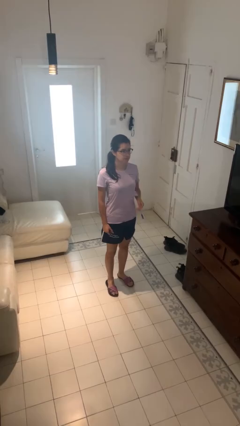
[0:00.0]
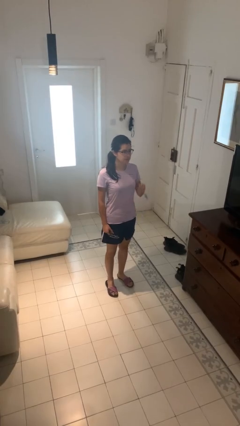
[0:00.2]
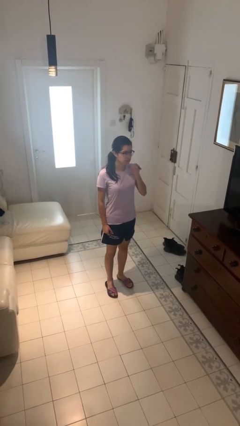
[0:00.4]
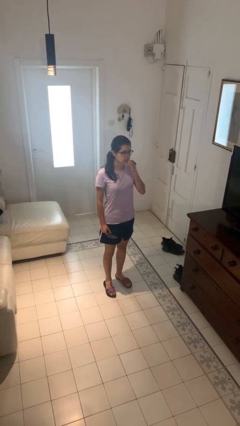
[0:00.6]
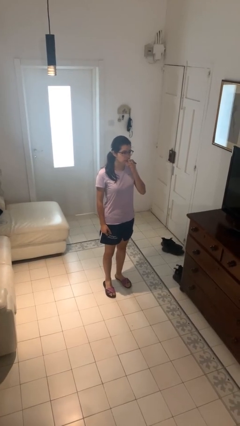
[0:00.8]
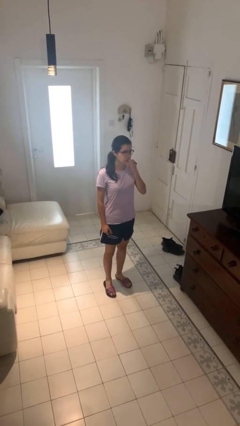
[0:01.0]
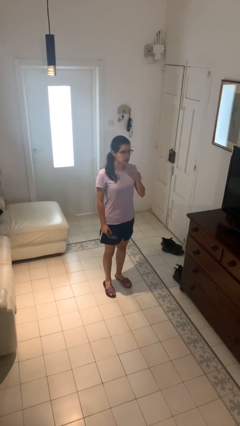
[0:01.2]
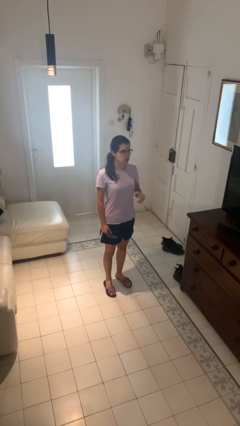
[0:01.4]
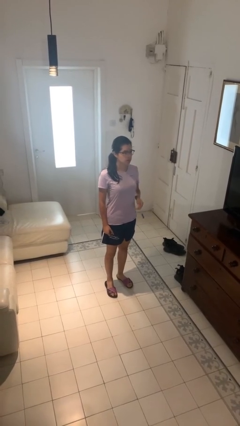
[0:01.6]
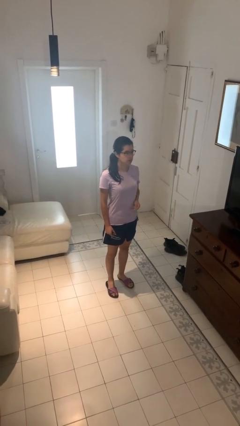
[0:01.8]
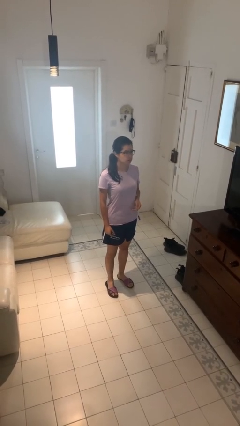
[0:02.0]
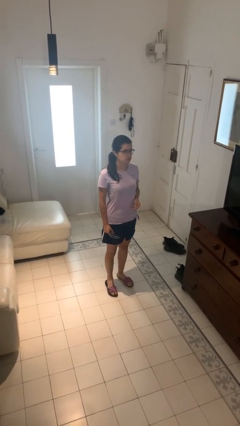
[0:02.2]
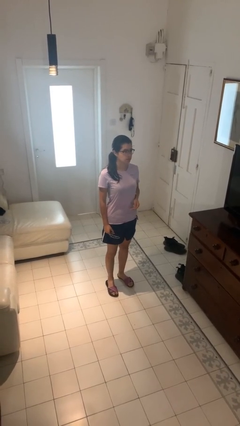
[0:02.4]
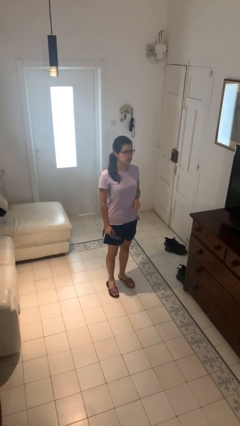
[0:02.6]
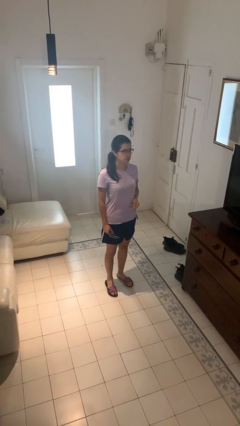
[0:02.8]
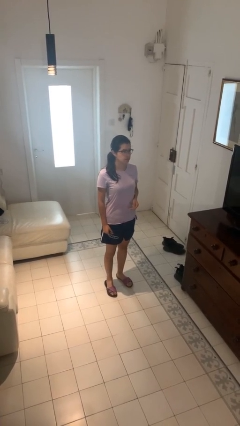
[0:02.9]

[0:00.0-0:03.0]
person vapes

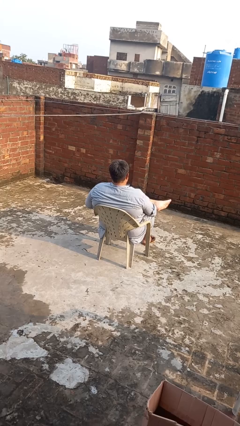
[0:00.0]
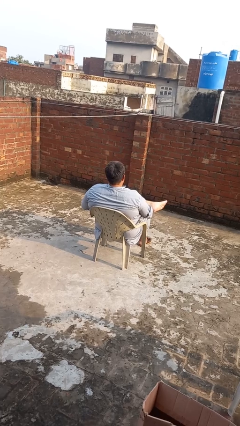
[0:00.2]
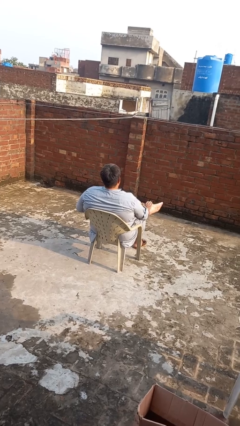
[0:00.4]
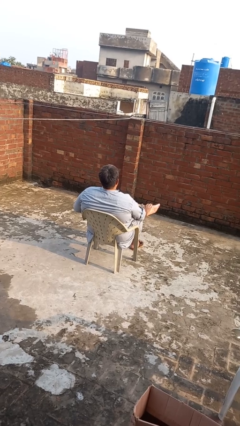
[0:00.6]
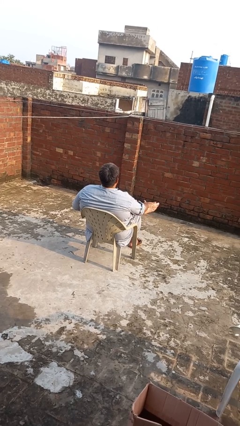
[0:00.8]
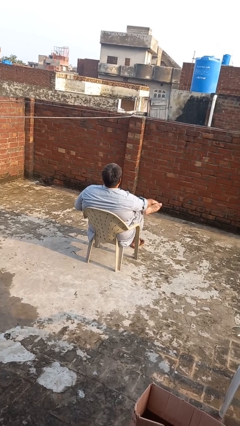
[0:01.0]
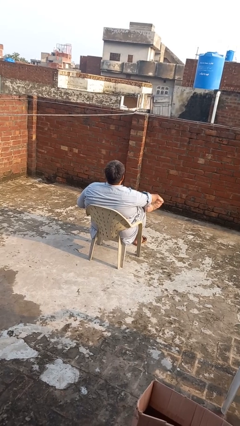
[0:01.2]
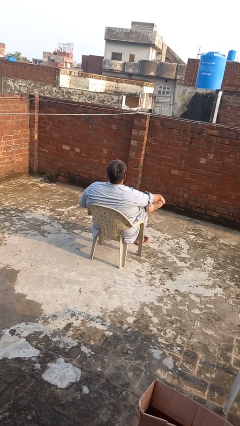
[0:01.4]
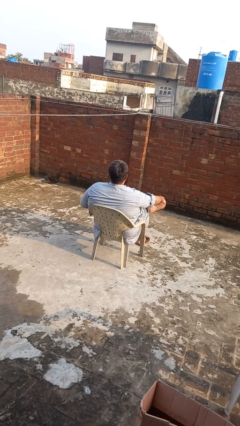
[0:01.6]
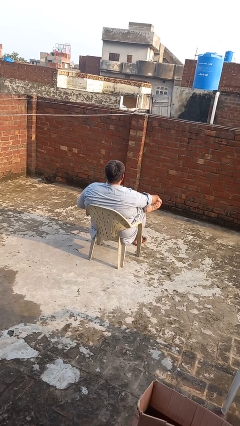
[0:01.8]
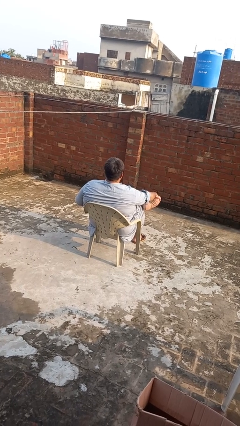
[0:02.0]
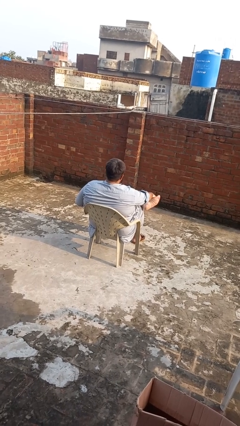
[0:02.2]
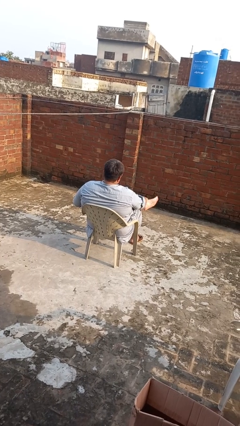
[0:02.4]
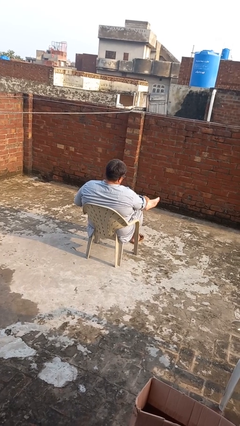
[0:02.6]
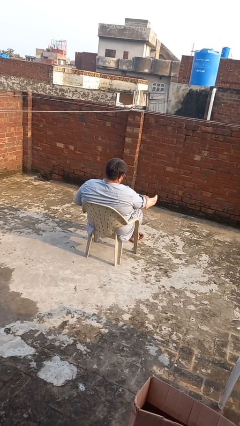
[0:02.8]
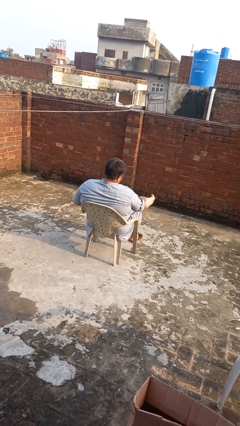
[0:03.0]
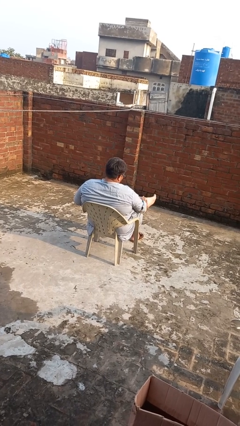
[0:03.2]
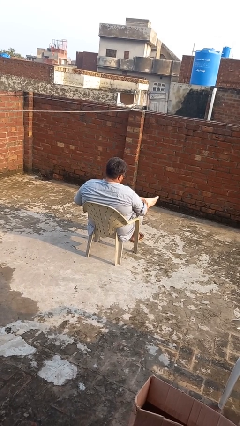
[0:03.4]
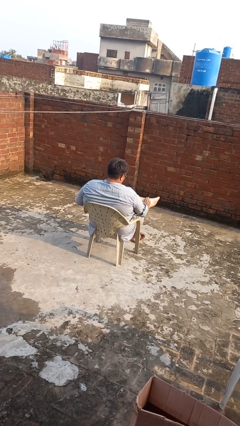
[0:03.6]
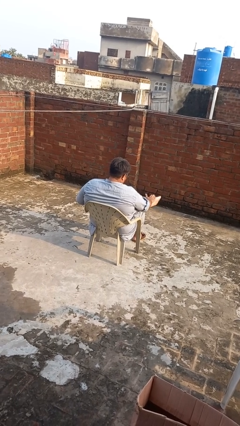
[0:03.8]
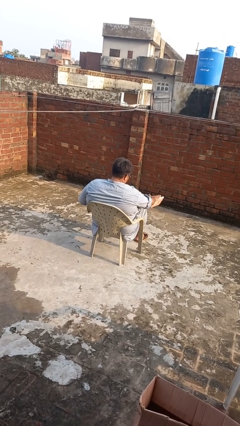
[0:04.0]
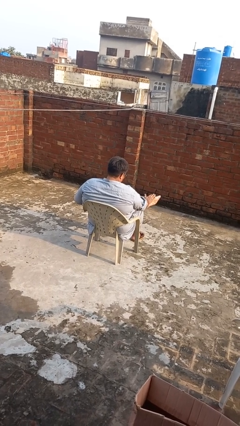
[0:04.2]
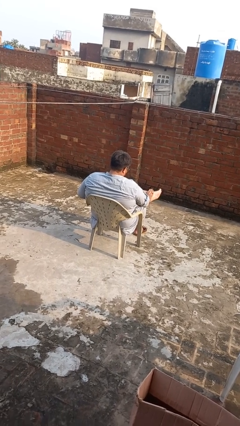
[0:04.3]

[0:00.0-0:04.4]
person rubs foot

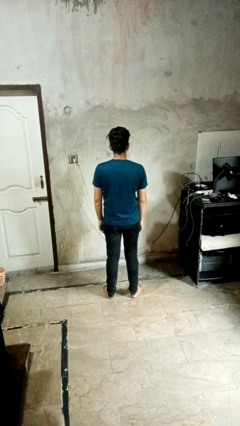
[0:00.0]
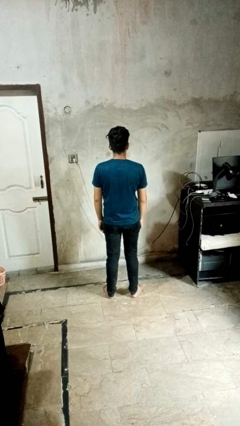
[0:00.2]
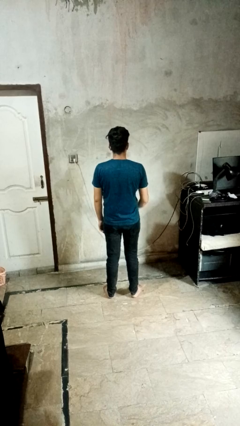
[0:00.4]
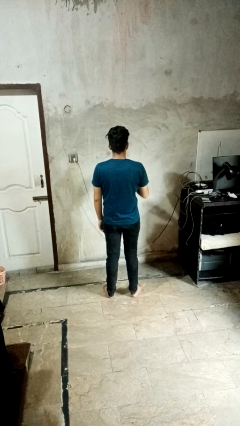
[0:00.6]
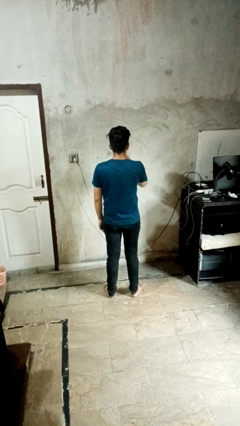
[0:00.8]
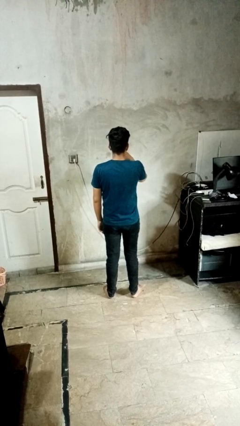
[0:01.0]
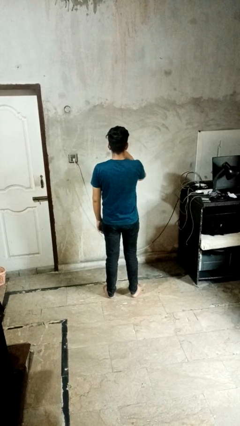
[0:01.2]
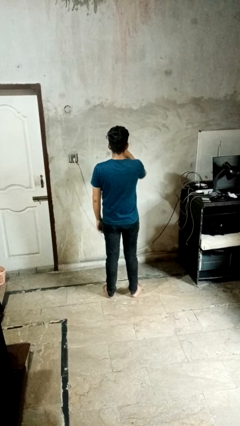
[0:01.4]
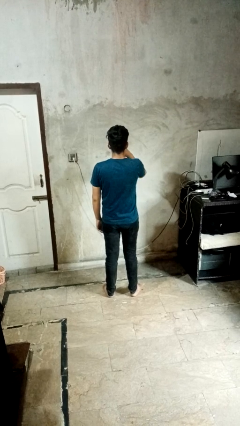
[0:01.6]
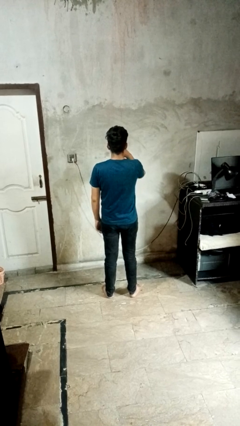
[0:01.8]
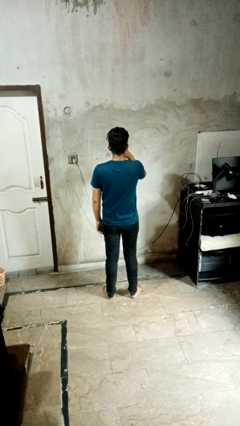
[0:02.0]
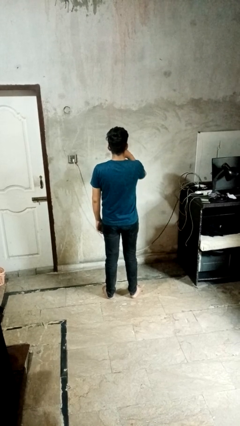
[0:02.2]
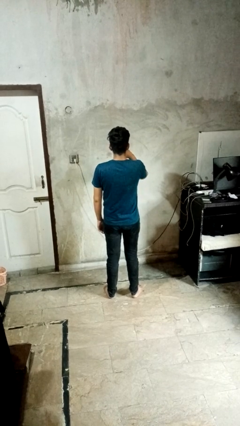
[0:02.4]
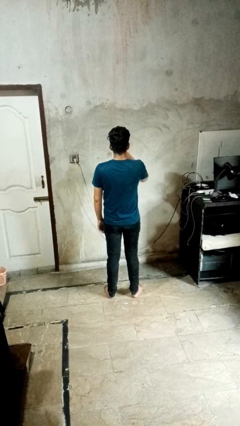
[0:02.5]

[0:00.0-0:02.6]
person yawns

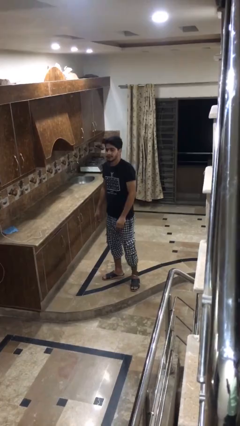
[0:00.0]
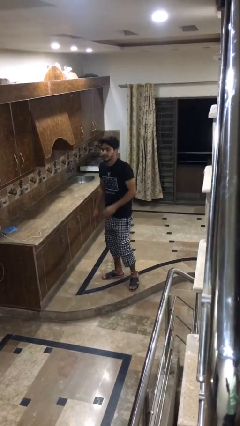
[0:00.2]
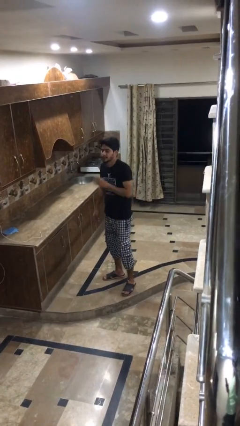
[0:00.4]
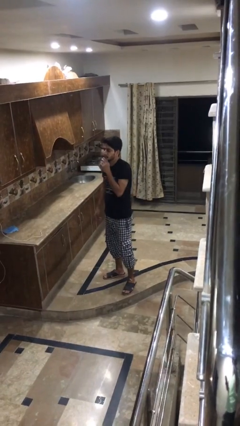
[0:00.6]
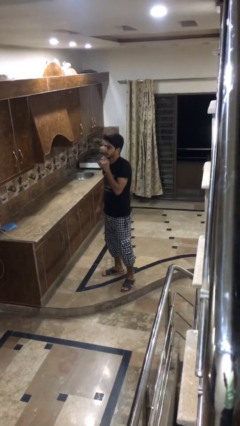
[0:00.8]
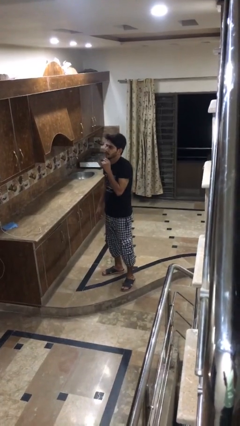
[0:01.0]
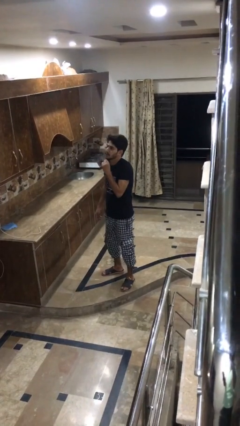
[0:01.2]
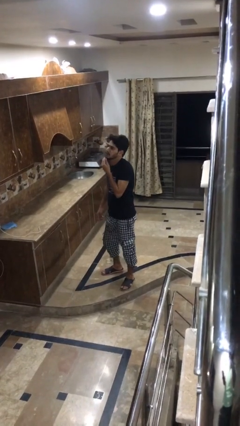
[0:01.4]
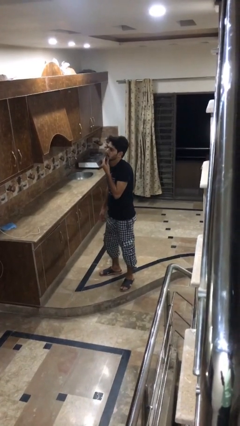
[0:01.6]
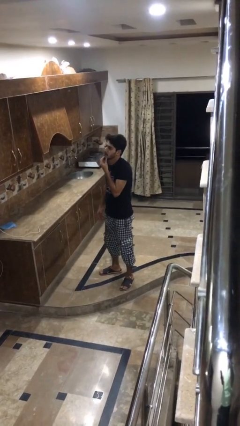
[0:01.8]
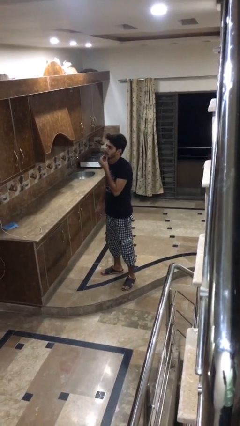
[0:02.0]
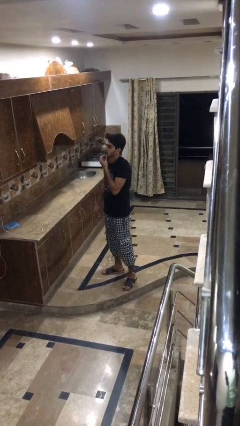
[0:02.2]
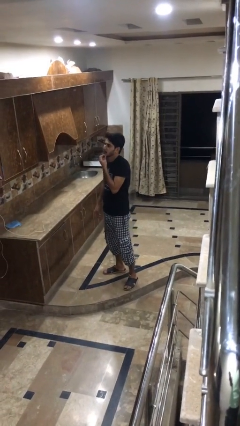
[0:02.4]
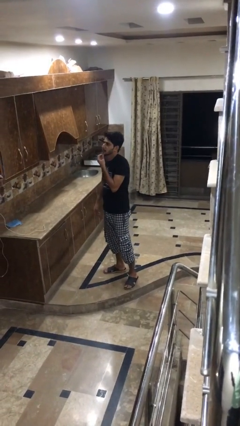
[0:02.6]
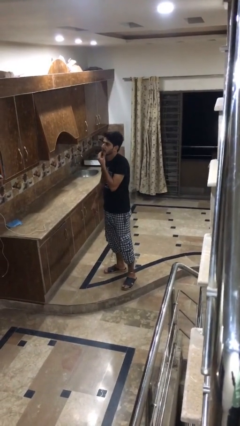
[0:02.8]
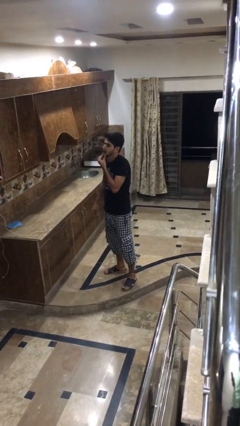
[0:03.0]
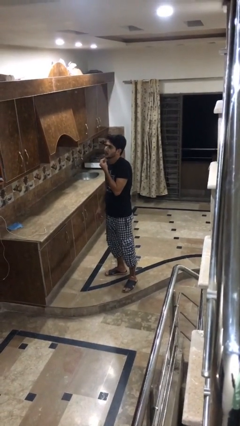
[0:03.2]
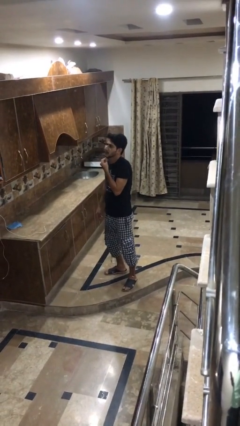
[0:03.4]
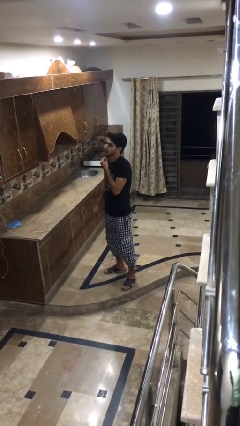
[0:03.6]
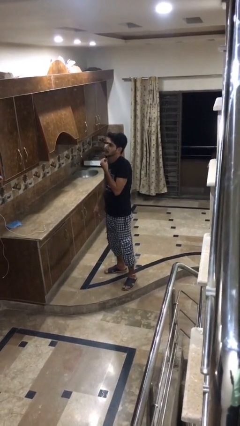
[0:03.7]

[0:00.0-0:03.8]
person strokes chin

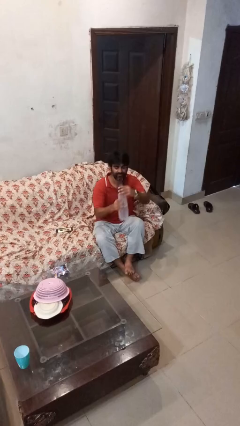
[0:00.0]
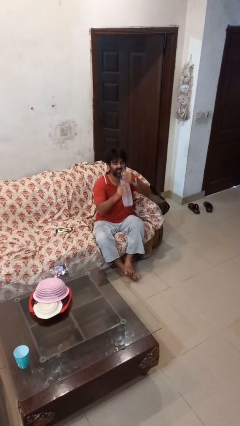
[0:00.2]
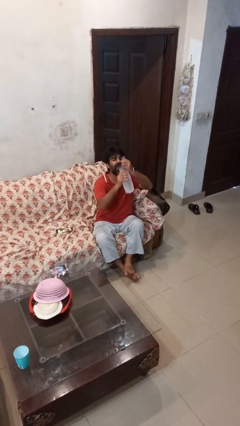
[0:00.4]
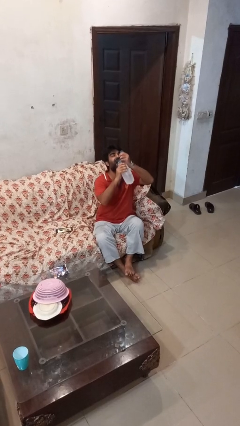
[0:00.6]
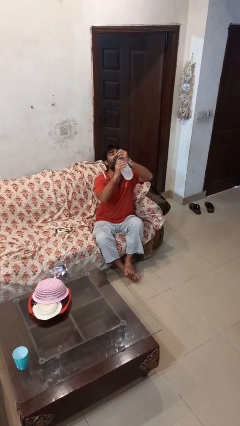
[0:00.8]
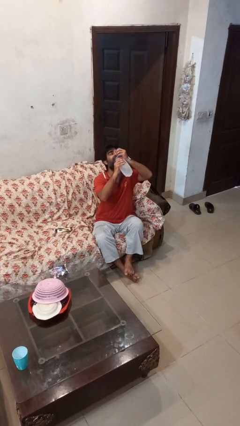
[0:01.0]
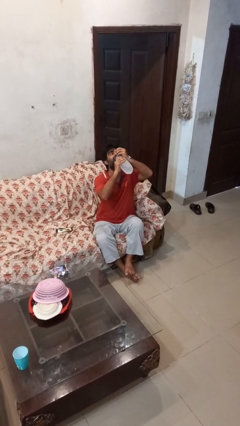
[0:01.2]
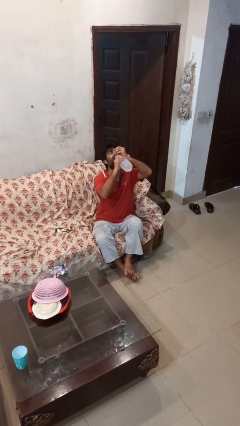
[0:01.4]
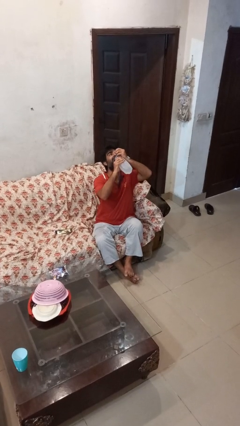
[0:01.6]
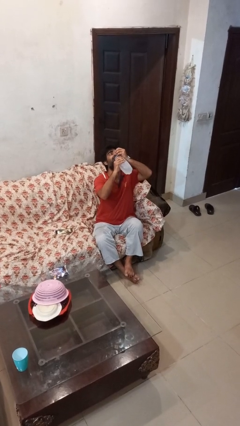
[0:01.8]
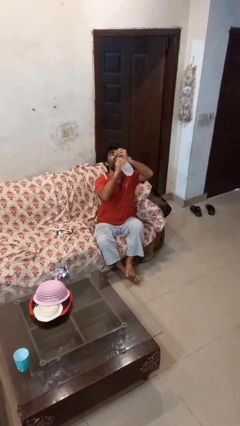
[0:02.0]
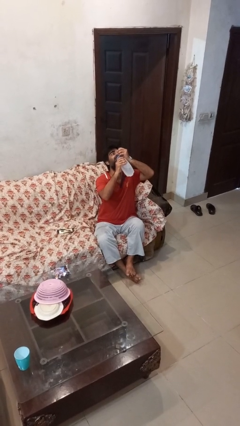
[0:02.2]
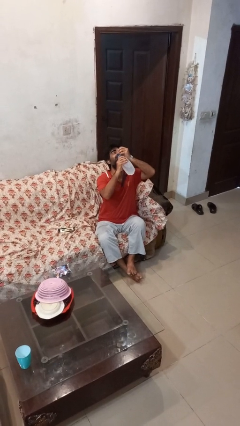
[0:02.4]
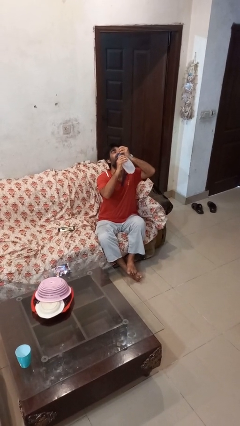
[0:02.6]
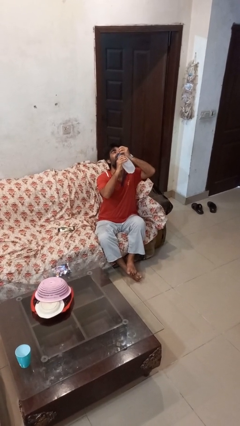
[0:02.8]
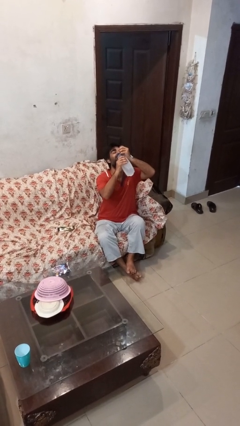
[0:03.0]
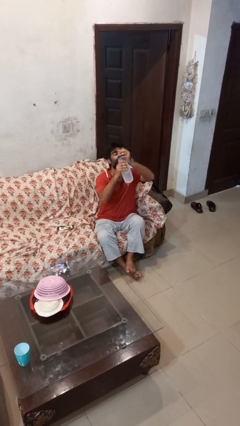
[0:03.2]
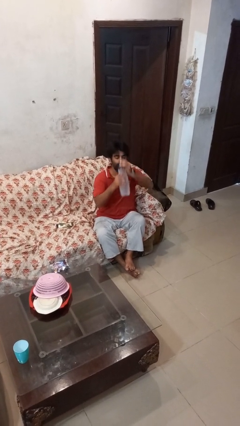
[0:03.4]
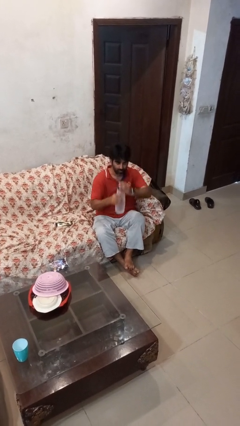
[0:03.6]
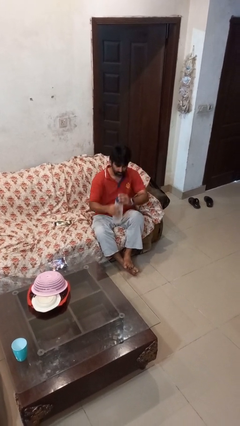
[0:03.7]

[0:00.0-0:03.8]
person drinks from bottle

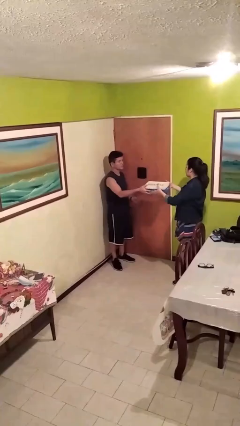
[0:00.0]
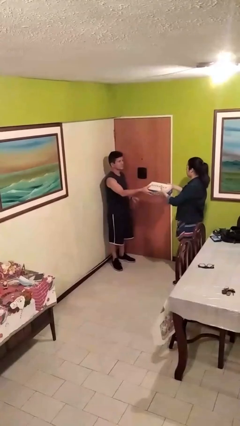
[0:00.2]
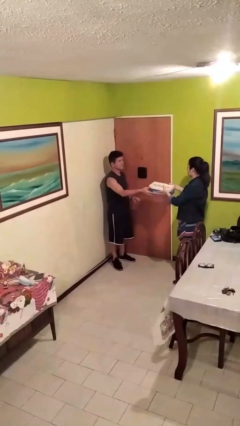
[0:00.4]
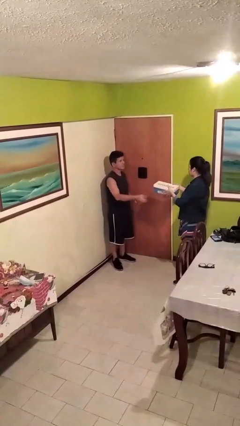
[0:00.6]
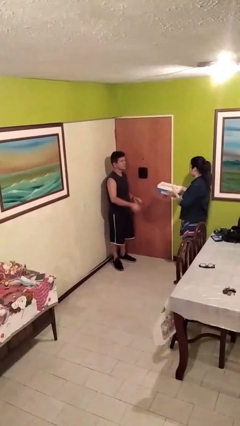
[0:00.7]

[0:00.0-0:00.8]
person transfers object to person
